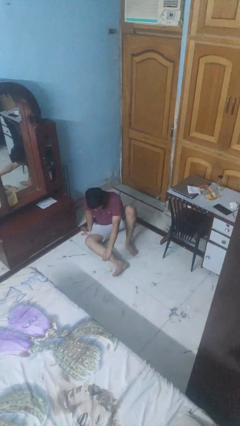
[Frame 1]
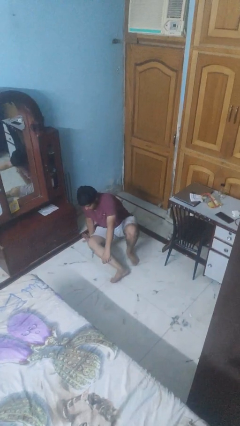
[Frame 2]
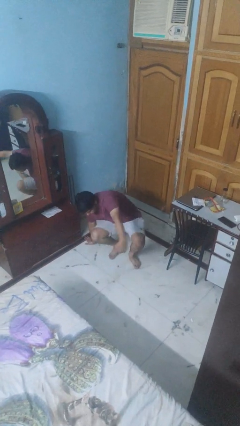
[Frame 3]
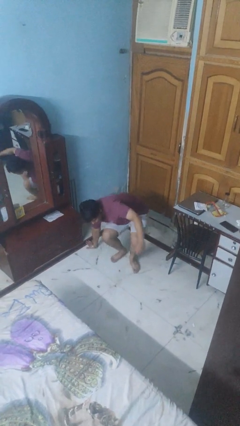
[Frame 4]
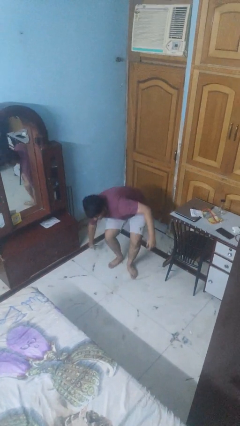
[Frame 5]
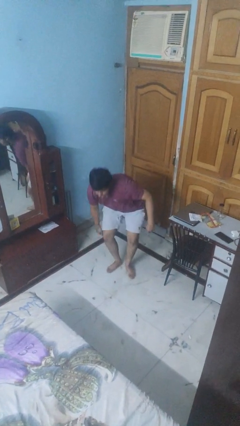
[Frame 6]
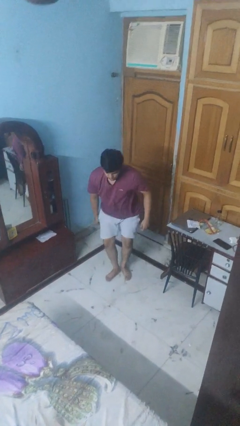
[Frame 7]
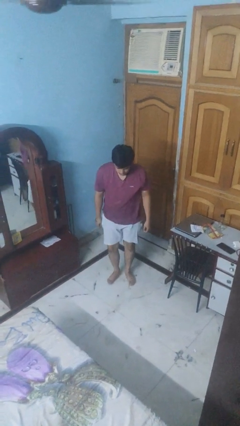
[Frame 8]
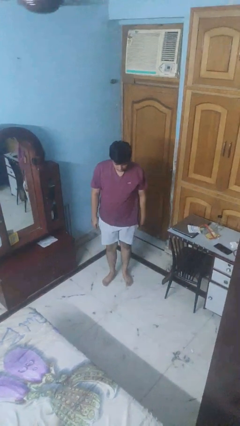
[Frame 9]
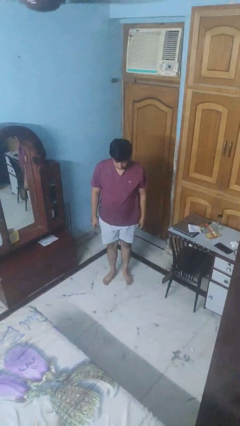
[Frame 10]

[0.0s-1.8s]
person stands up from floor

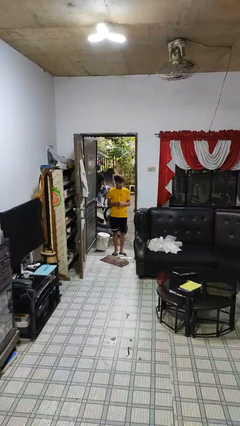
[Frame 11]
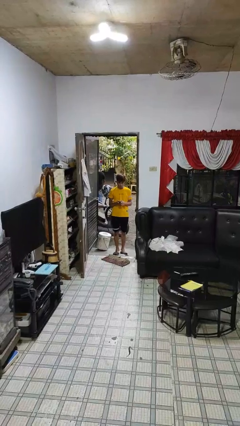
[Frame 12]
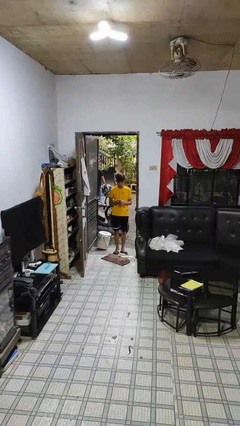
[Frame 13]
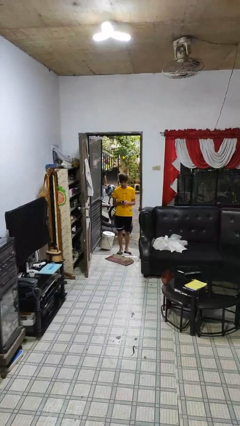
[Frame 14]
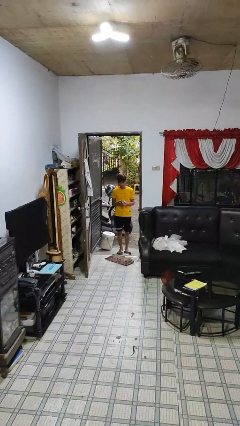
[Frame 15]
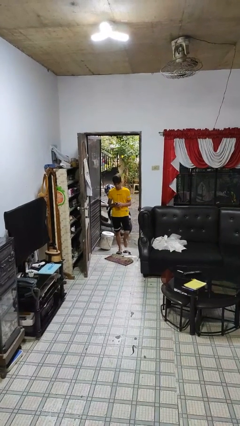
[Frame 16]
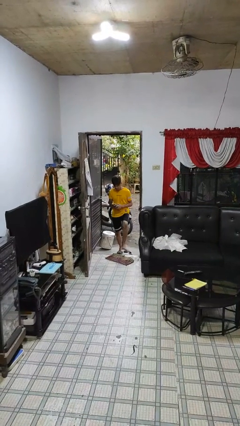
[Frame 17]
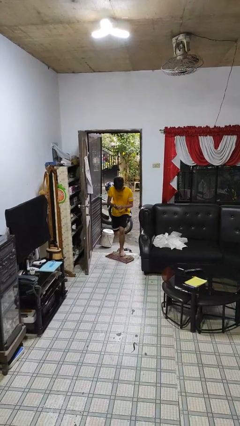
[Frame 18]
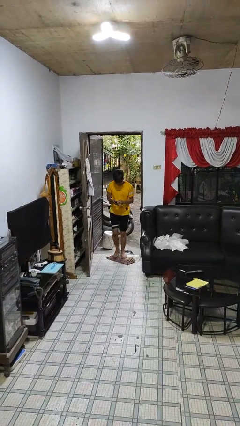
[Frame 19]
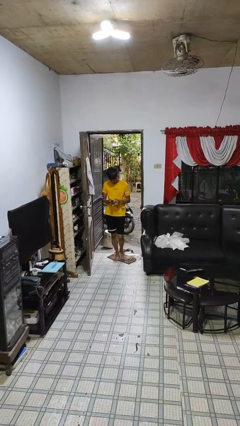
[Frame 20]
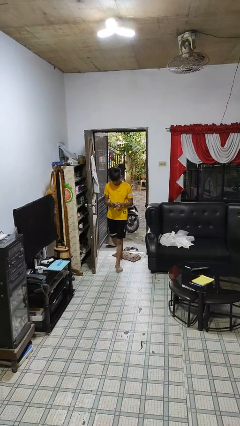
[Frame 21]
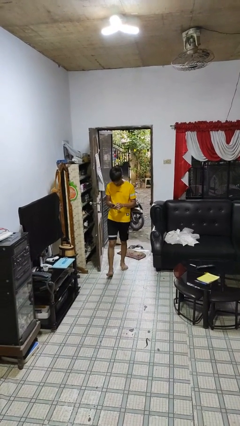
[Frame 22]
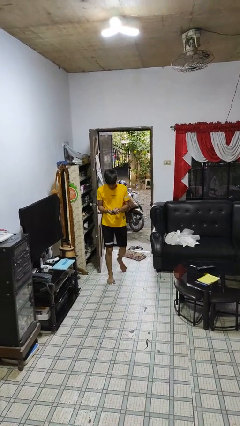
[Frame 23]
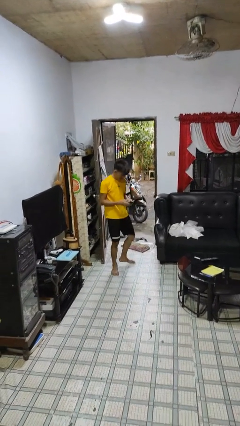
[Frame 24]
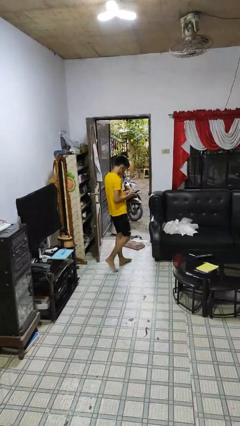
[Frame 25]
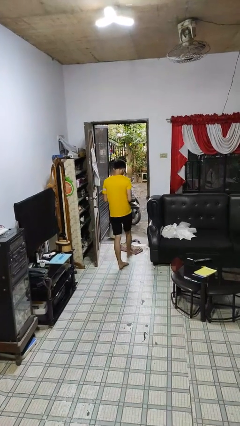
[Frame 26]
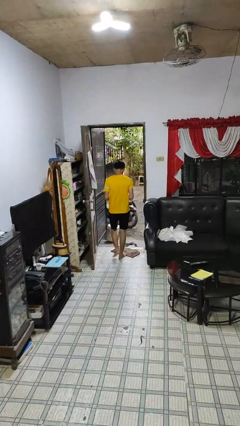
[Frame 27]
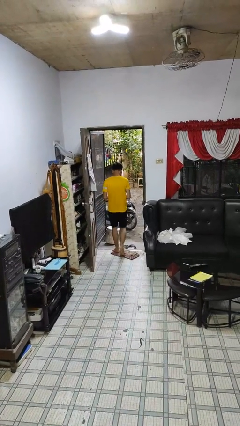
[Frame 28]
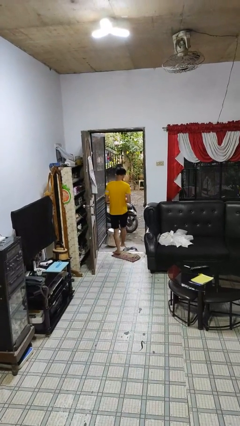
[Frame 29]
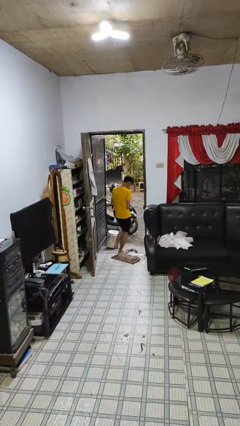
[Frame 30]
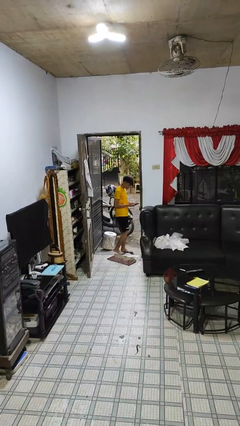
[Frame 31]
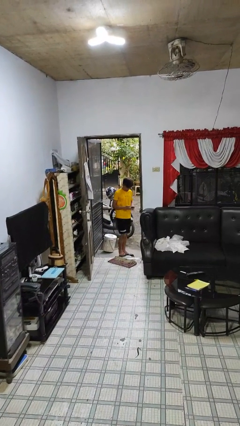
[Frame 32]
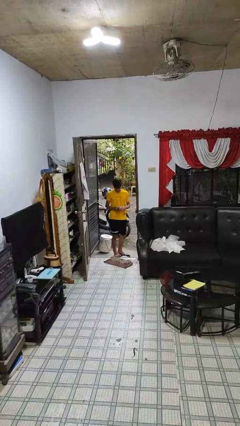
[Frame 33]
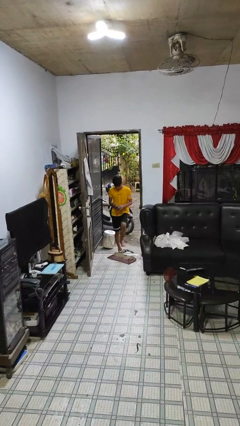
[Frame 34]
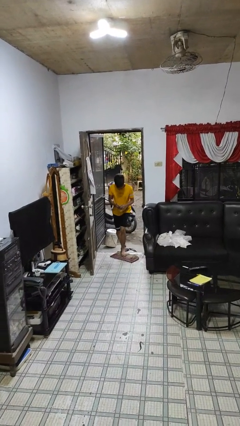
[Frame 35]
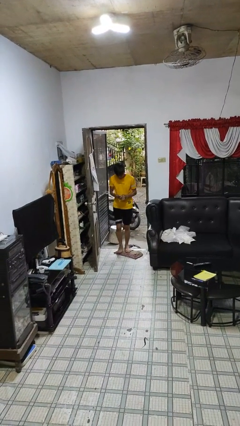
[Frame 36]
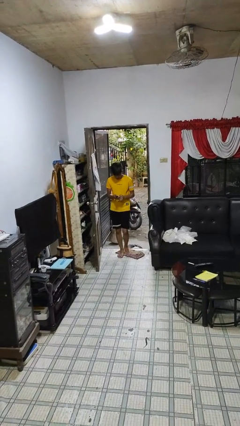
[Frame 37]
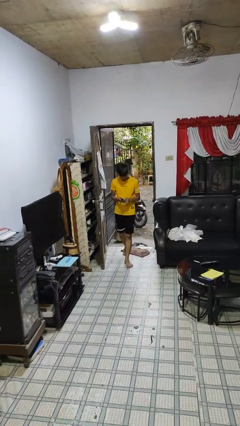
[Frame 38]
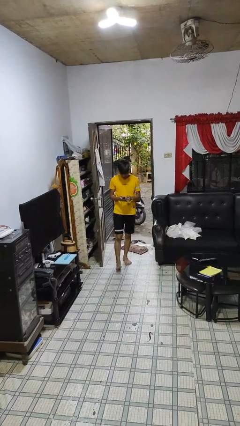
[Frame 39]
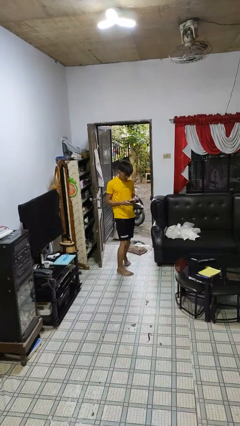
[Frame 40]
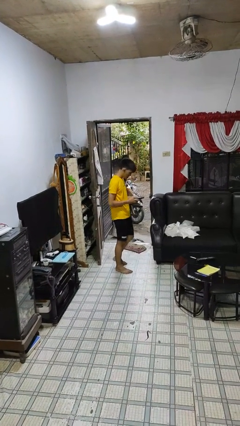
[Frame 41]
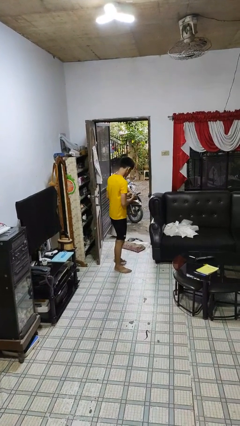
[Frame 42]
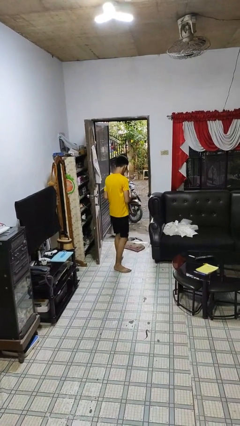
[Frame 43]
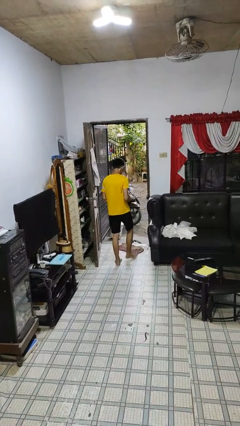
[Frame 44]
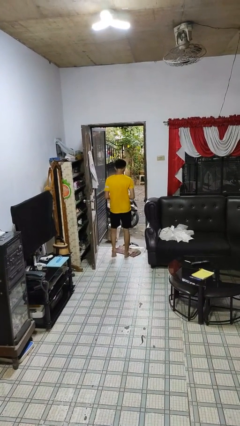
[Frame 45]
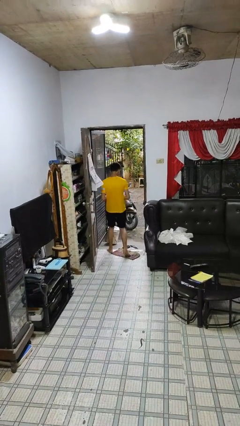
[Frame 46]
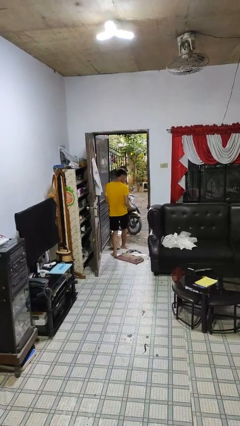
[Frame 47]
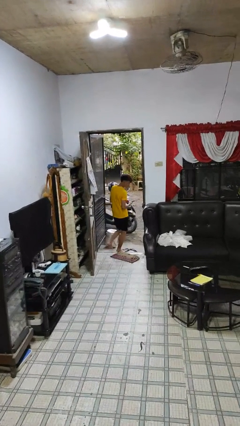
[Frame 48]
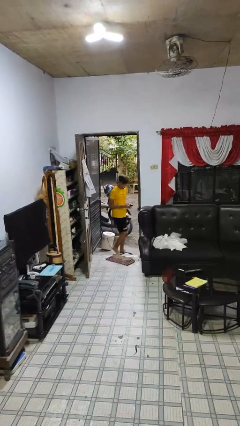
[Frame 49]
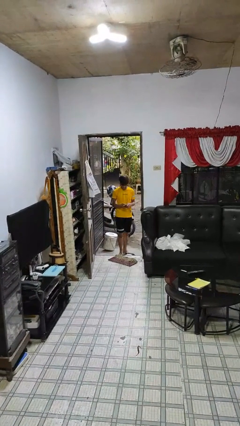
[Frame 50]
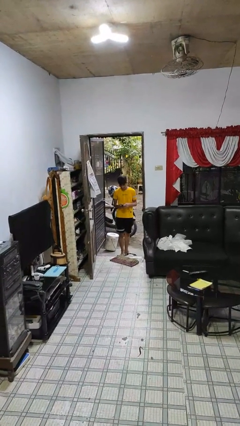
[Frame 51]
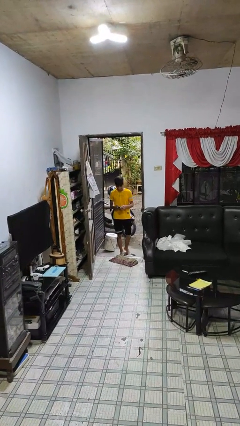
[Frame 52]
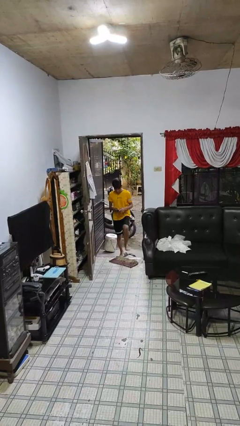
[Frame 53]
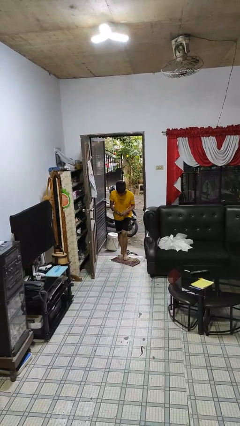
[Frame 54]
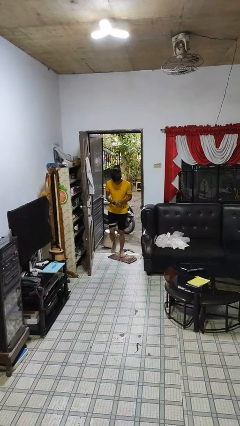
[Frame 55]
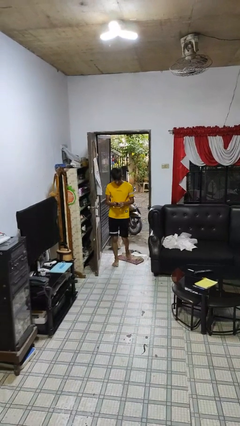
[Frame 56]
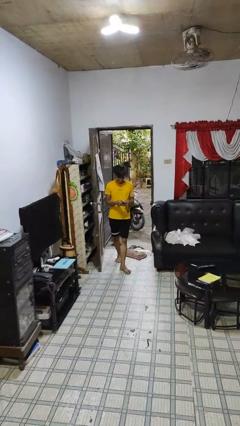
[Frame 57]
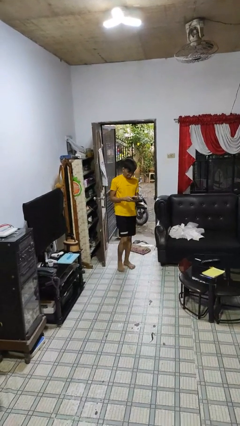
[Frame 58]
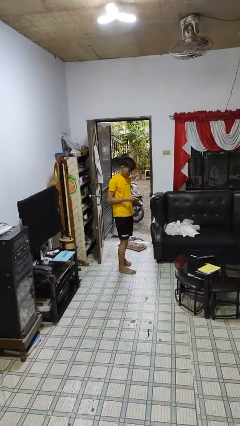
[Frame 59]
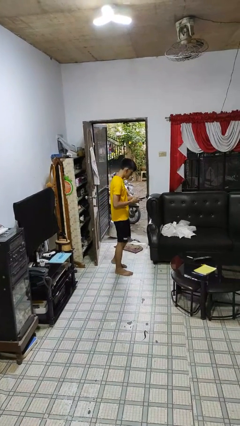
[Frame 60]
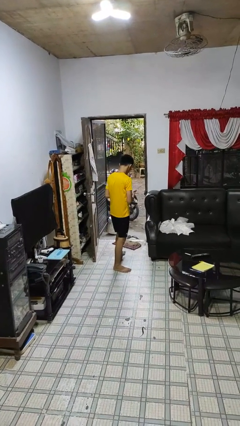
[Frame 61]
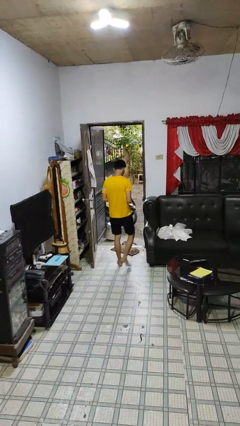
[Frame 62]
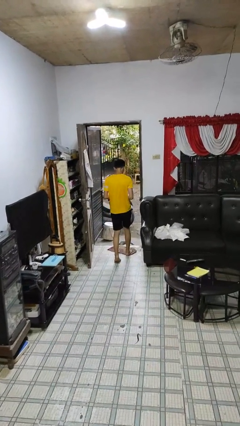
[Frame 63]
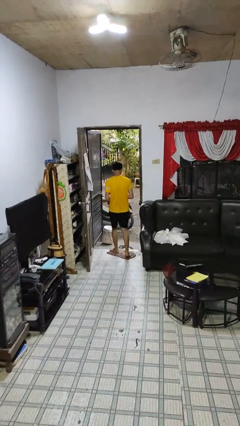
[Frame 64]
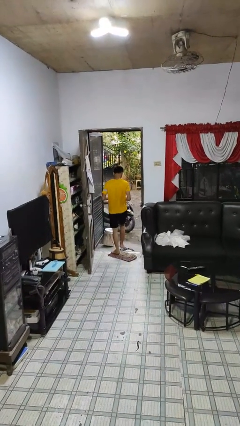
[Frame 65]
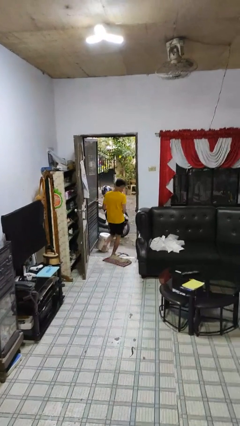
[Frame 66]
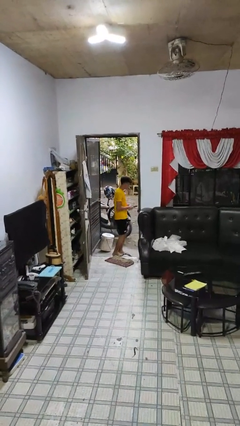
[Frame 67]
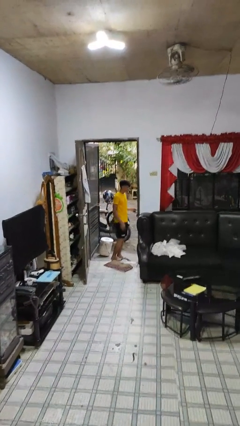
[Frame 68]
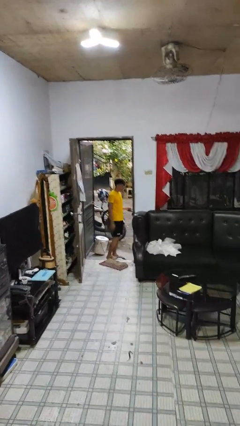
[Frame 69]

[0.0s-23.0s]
person texts on phone

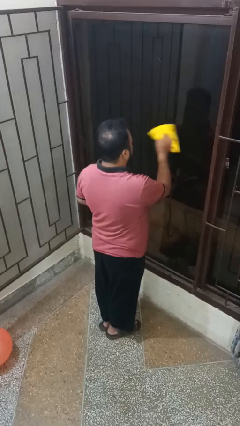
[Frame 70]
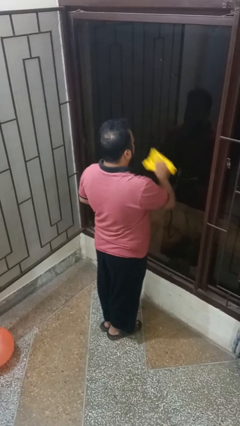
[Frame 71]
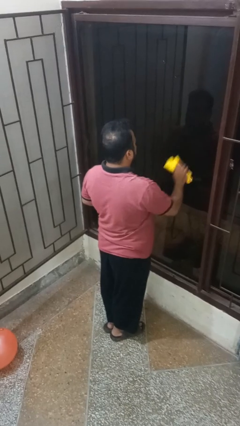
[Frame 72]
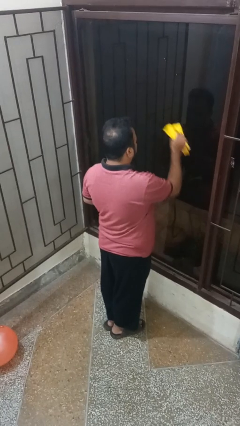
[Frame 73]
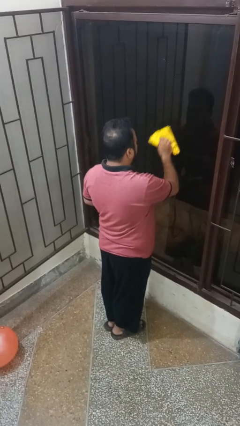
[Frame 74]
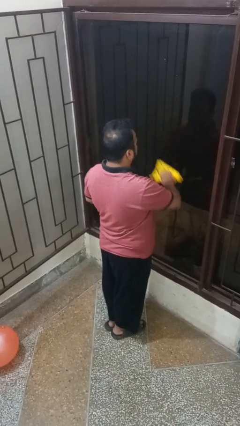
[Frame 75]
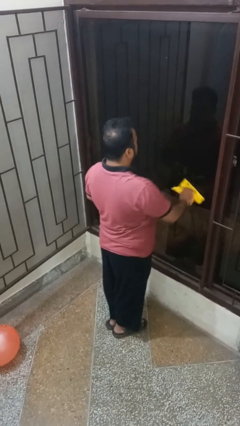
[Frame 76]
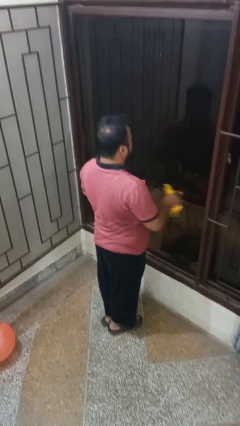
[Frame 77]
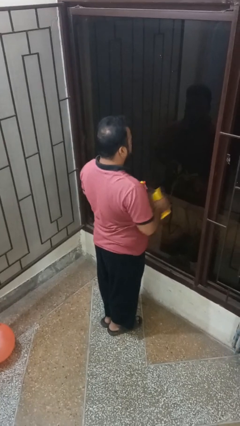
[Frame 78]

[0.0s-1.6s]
person washes window

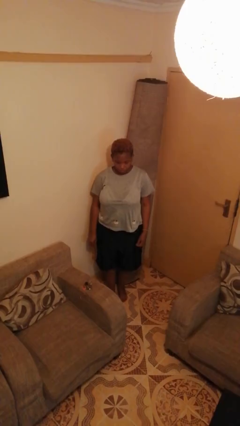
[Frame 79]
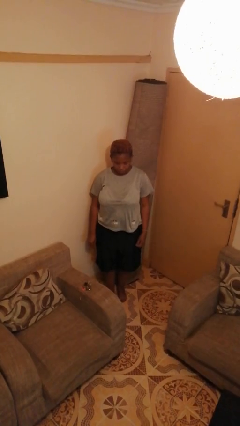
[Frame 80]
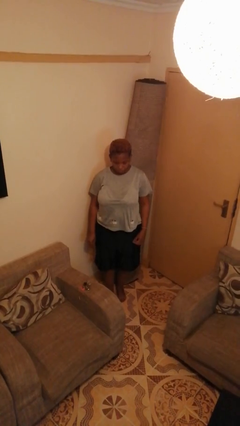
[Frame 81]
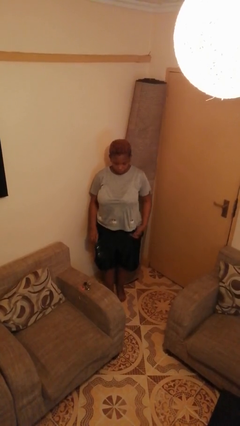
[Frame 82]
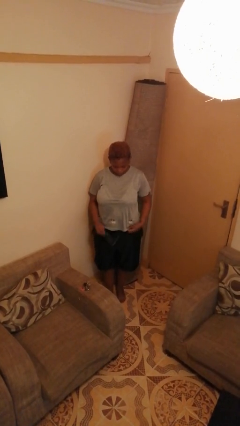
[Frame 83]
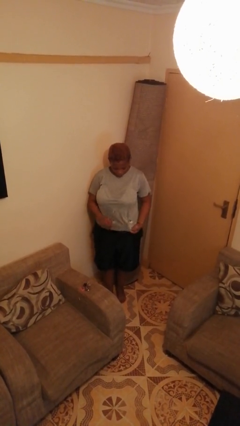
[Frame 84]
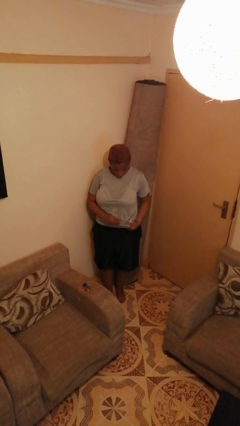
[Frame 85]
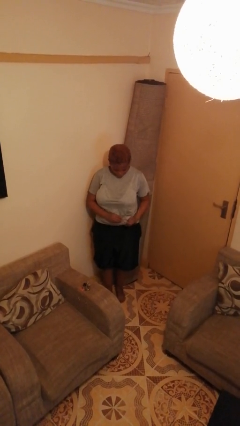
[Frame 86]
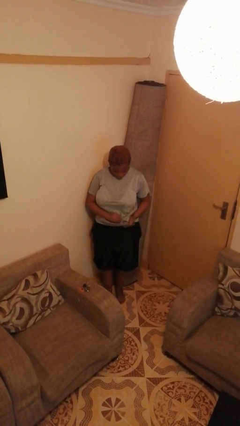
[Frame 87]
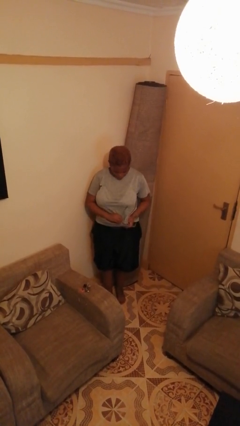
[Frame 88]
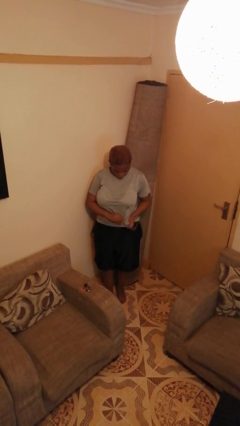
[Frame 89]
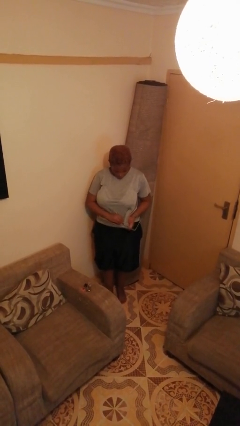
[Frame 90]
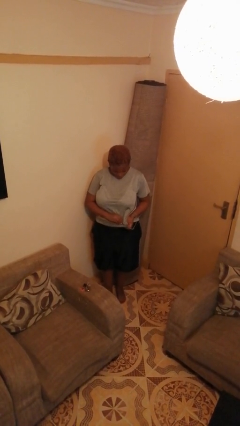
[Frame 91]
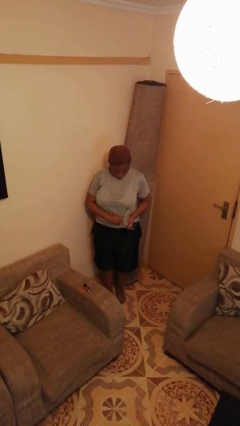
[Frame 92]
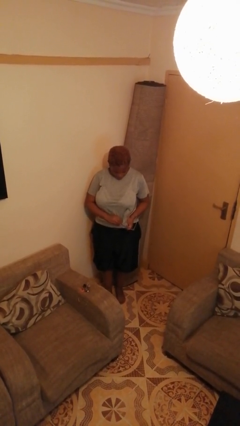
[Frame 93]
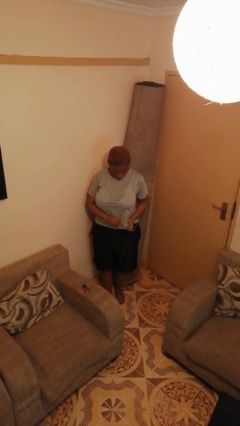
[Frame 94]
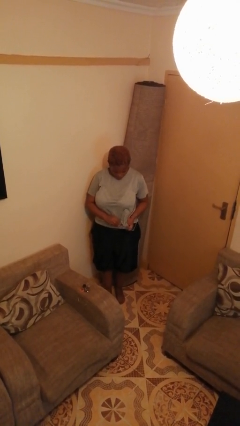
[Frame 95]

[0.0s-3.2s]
person cleans eyeglasses
